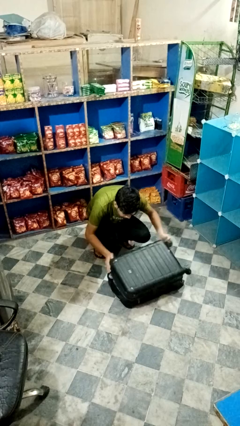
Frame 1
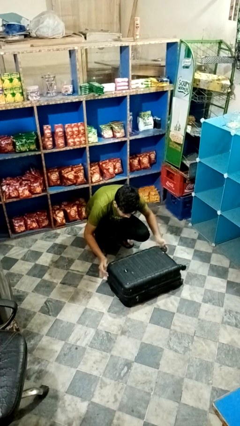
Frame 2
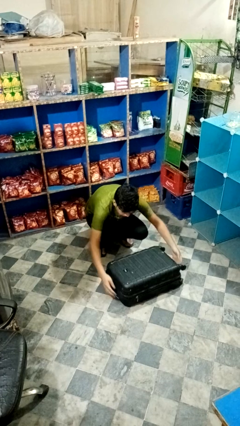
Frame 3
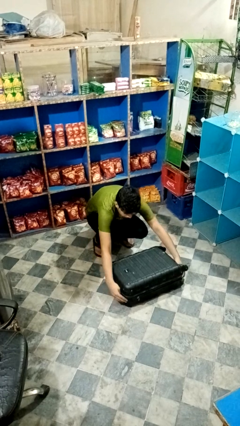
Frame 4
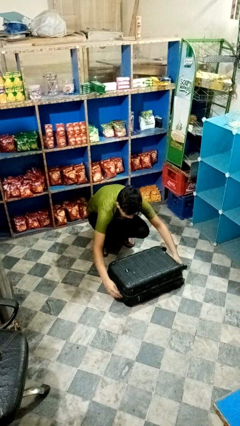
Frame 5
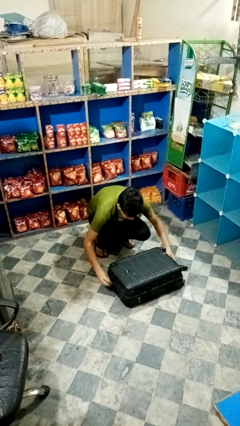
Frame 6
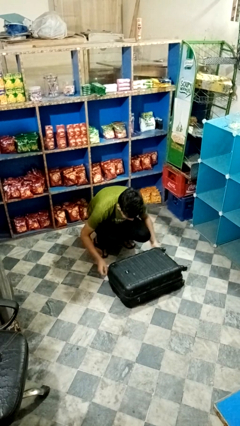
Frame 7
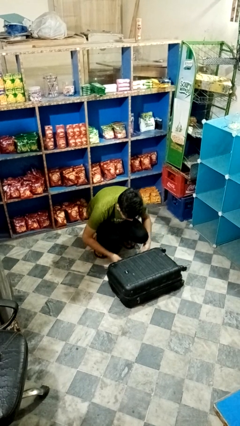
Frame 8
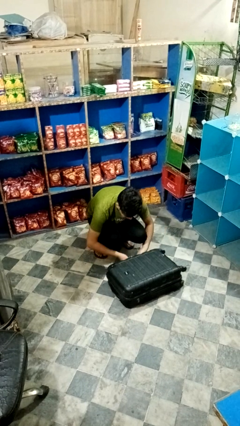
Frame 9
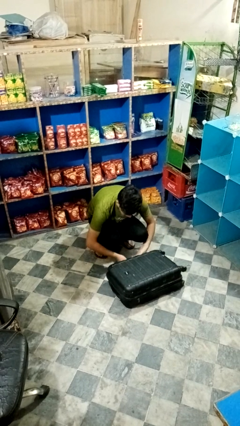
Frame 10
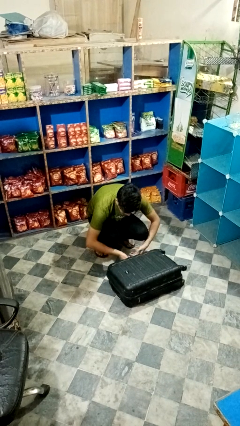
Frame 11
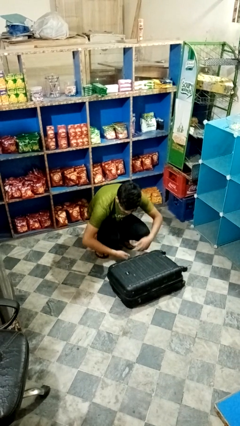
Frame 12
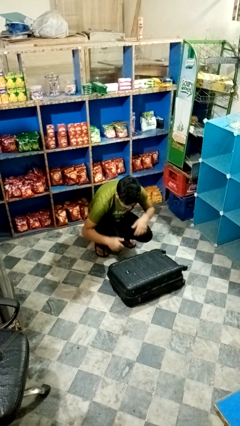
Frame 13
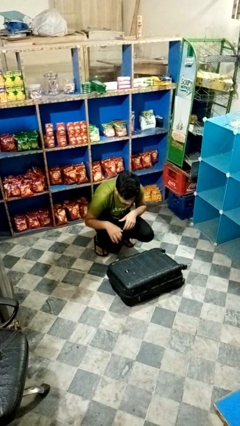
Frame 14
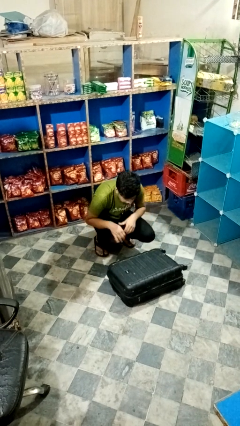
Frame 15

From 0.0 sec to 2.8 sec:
person closes suitcase

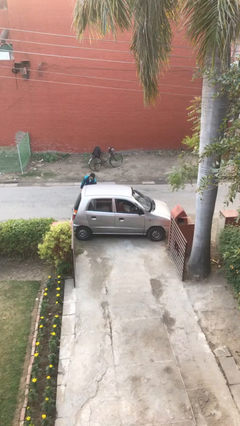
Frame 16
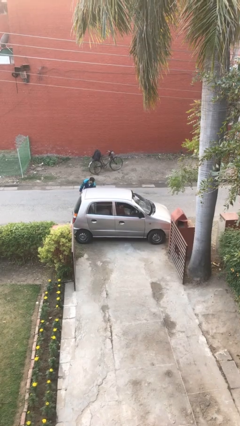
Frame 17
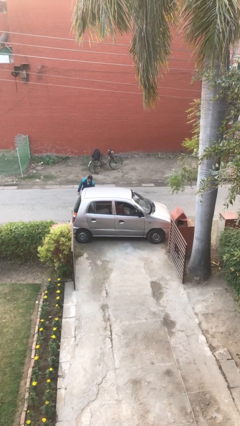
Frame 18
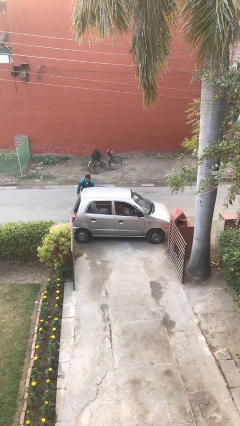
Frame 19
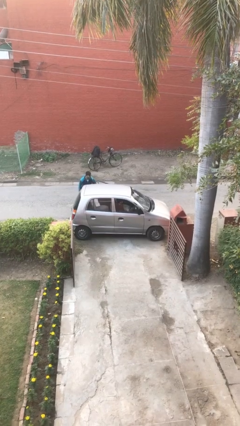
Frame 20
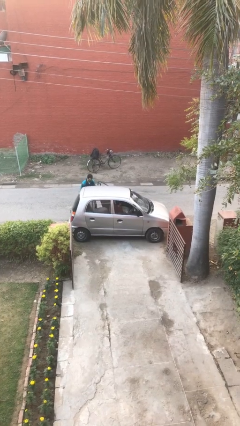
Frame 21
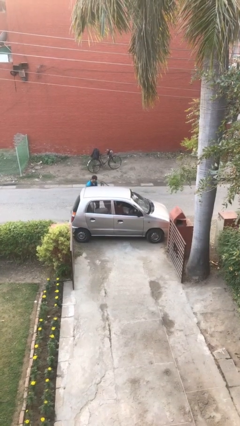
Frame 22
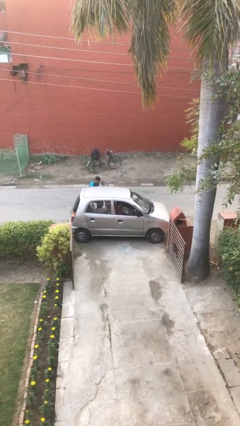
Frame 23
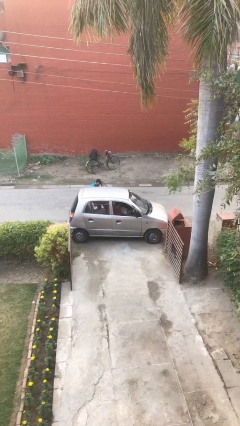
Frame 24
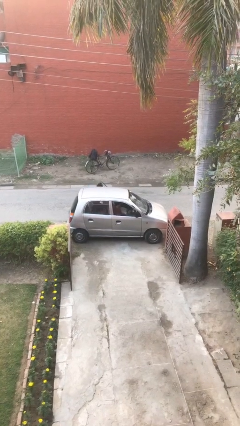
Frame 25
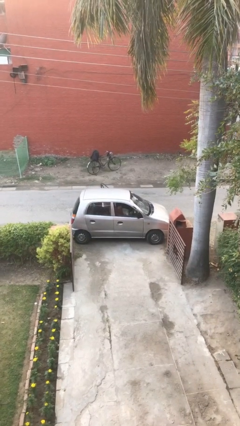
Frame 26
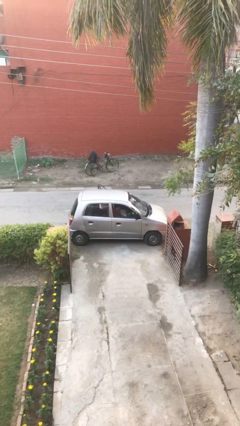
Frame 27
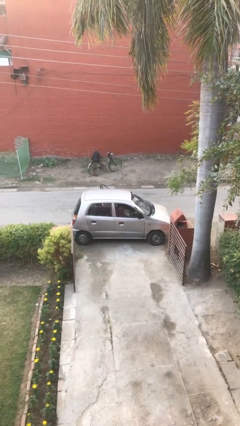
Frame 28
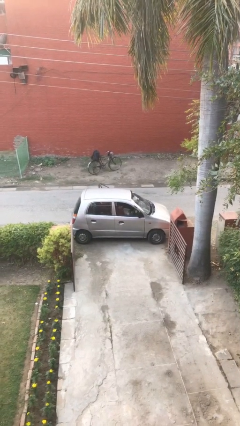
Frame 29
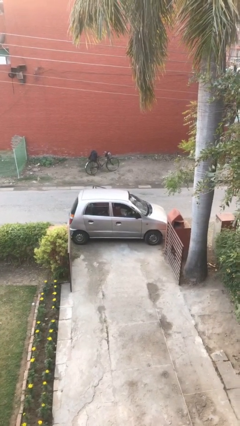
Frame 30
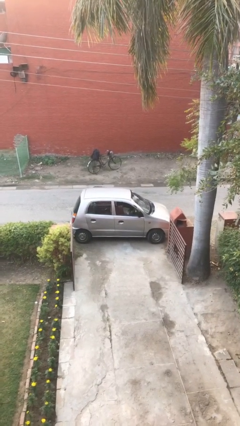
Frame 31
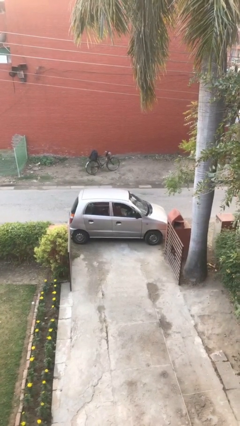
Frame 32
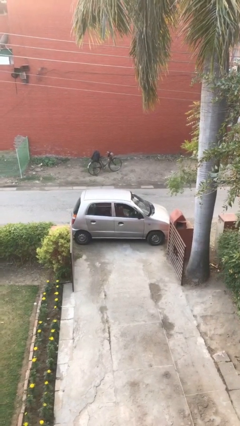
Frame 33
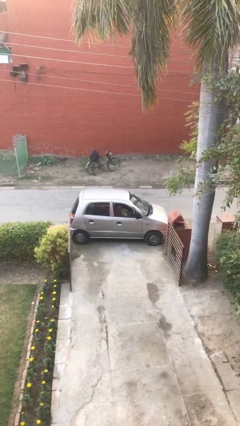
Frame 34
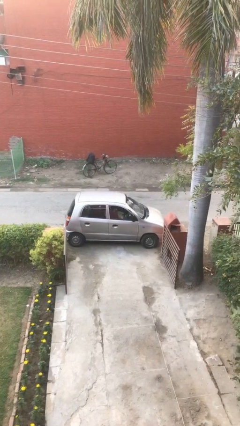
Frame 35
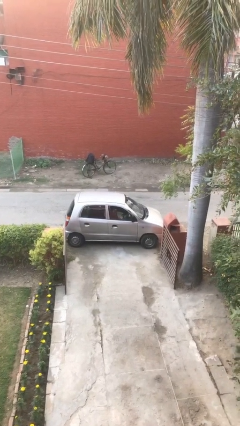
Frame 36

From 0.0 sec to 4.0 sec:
car picks up person

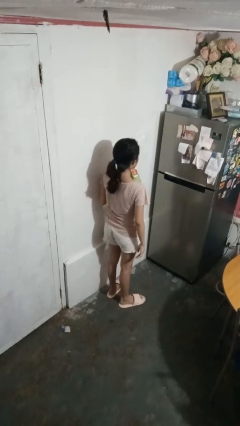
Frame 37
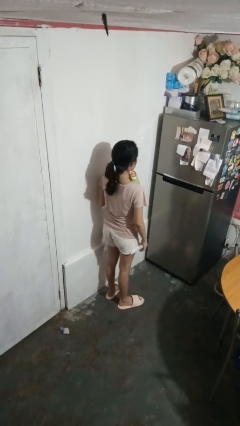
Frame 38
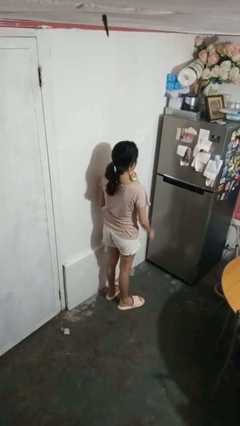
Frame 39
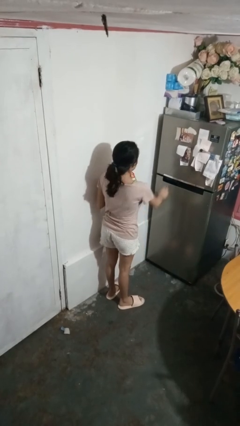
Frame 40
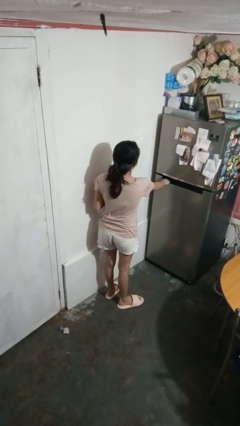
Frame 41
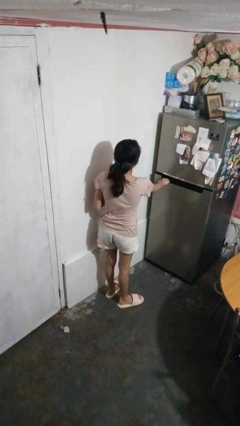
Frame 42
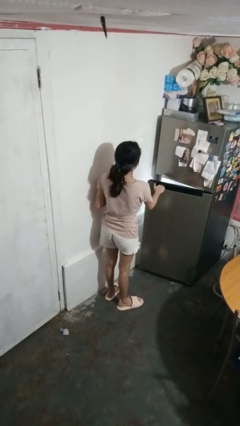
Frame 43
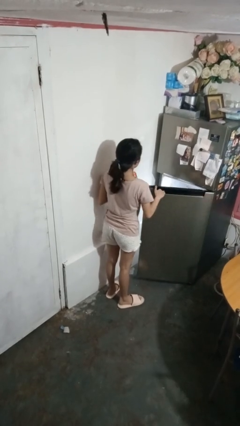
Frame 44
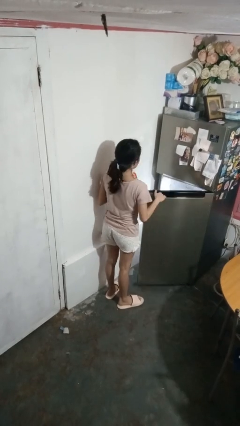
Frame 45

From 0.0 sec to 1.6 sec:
person opens refrigerator

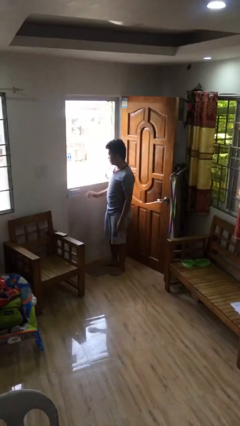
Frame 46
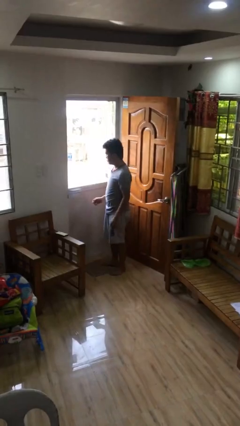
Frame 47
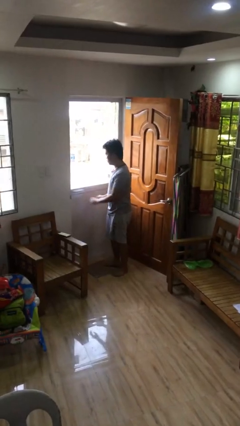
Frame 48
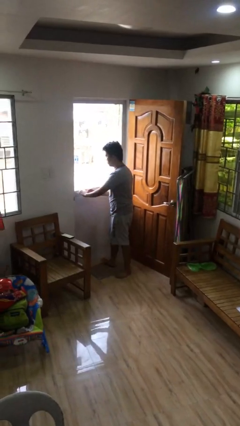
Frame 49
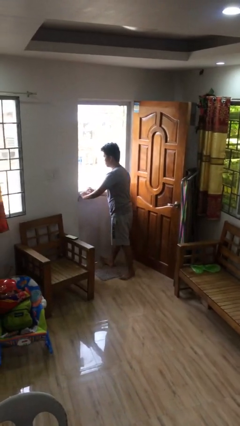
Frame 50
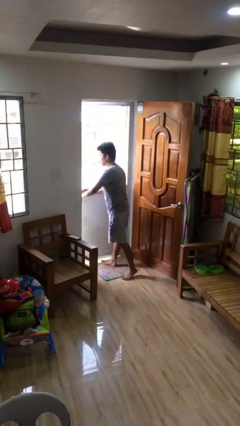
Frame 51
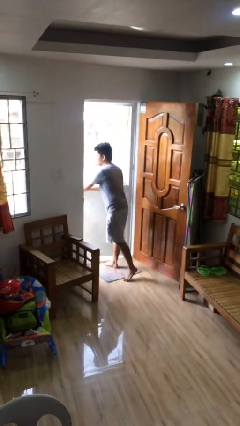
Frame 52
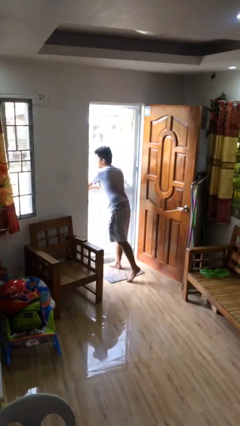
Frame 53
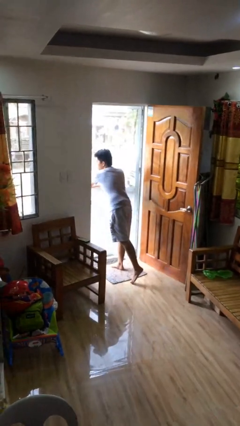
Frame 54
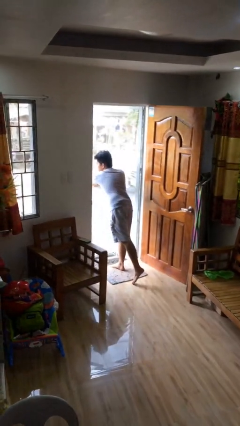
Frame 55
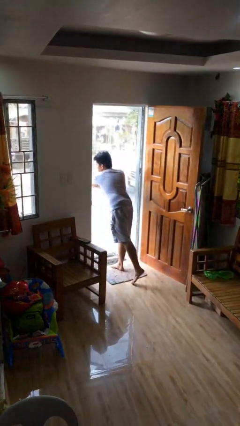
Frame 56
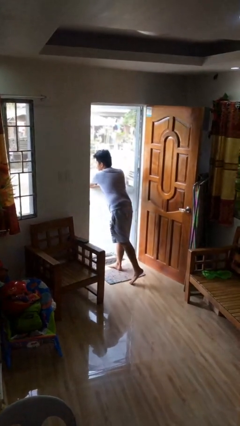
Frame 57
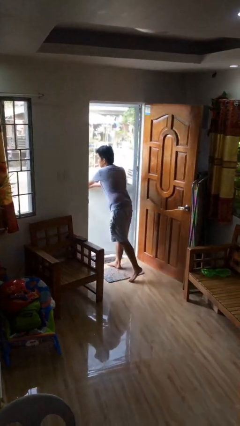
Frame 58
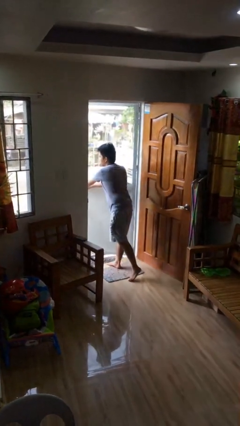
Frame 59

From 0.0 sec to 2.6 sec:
person opens facility door

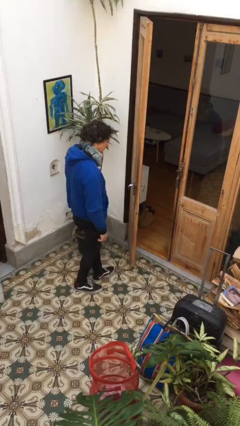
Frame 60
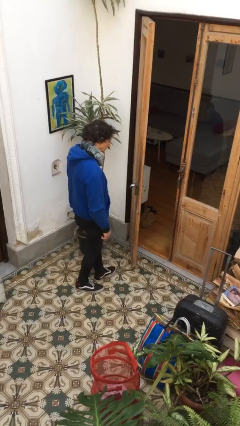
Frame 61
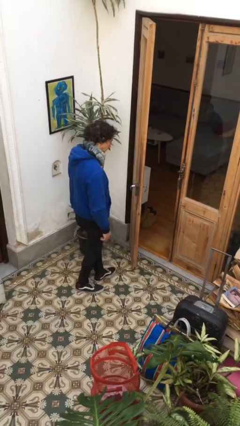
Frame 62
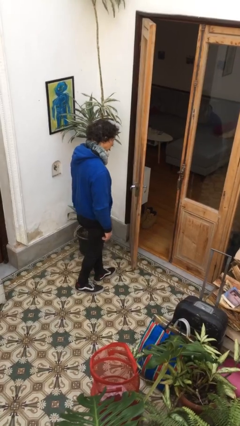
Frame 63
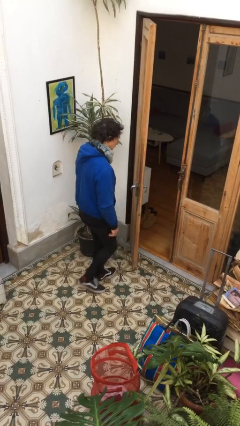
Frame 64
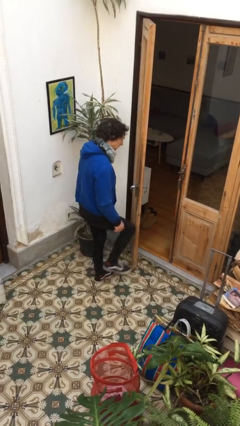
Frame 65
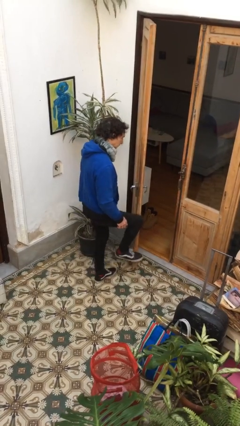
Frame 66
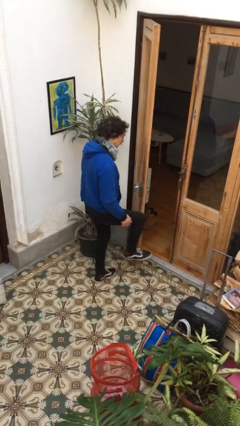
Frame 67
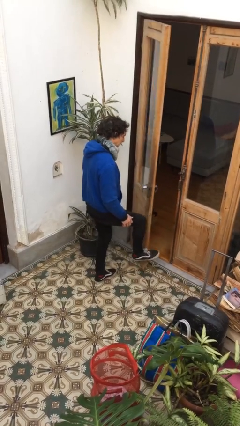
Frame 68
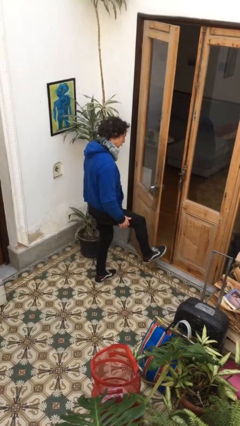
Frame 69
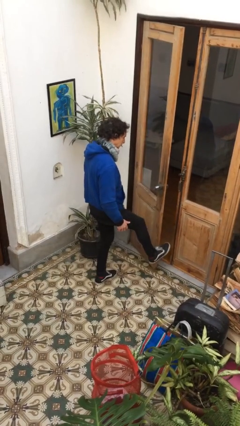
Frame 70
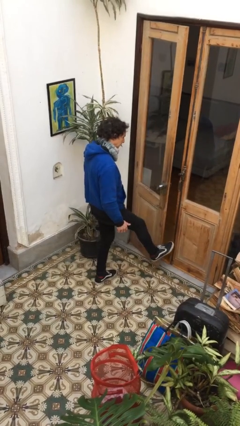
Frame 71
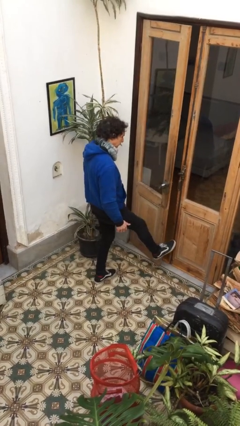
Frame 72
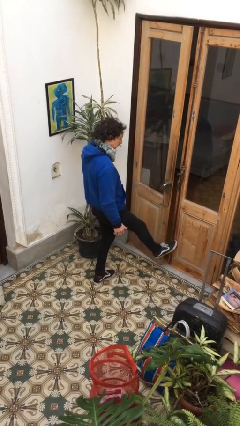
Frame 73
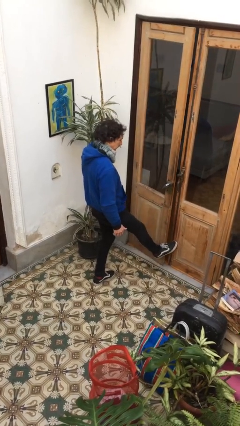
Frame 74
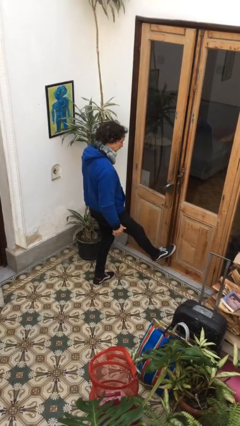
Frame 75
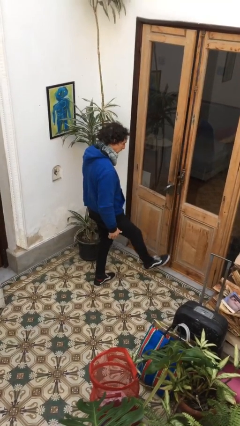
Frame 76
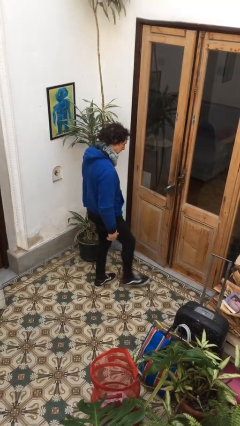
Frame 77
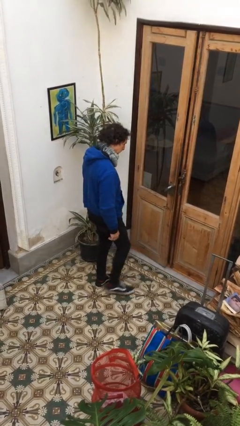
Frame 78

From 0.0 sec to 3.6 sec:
person closes door with foot

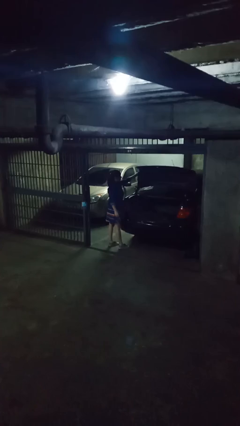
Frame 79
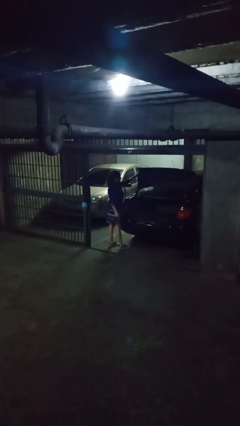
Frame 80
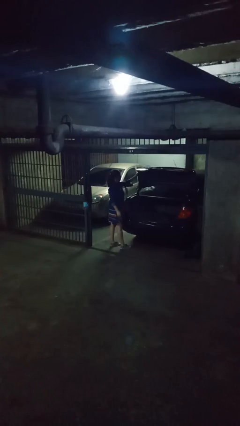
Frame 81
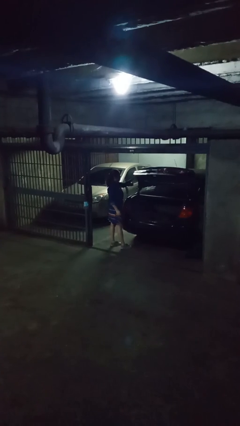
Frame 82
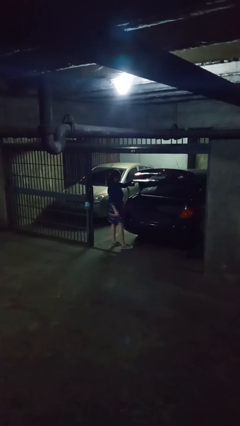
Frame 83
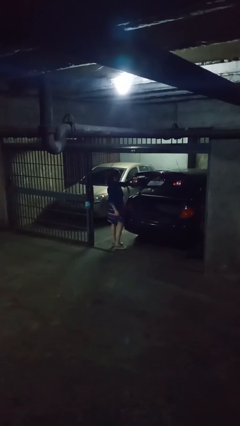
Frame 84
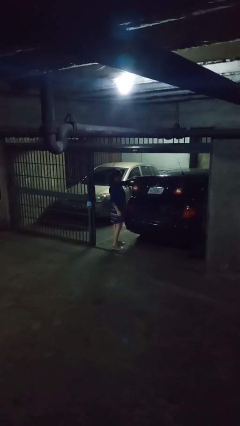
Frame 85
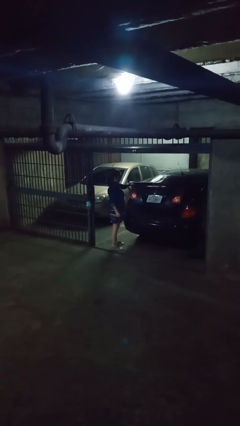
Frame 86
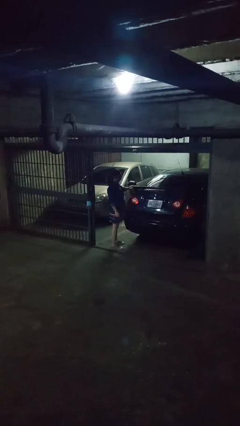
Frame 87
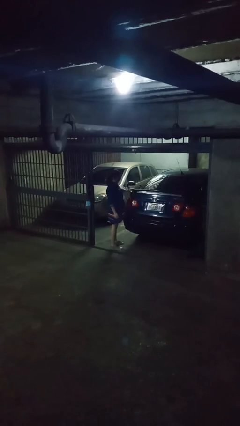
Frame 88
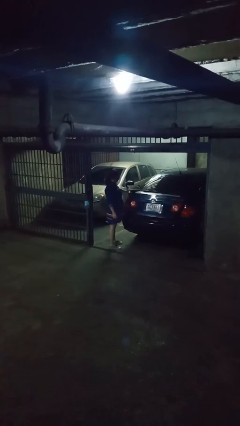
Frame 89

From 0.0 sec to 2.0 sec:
person closes car trunk

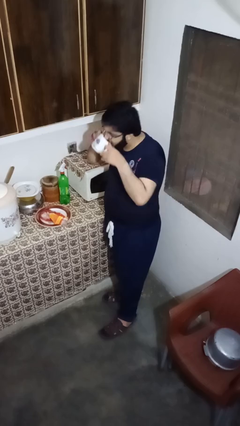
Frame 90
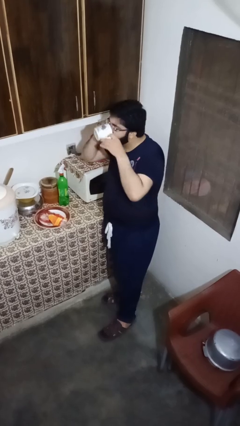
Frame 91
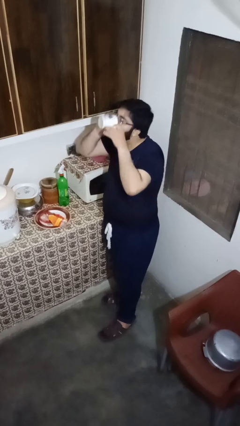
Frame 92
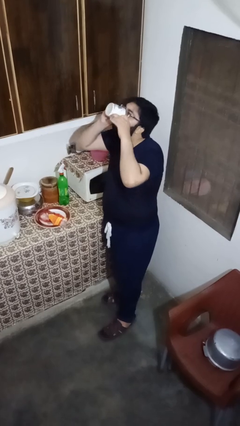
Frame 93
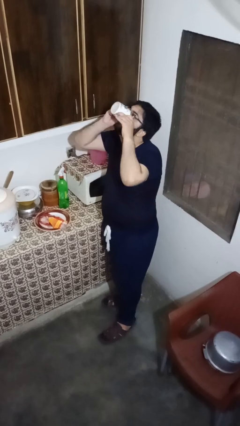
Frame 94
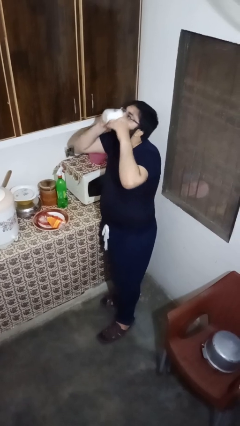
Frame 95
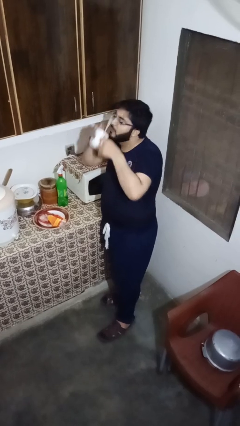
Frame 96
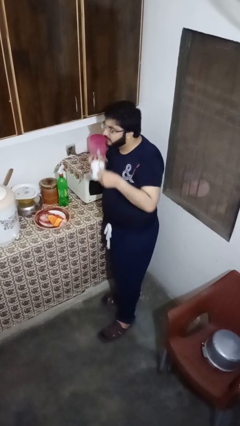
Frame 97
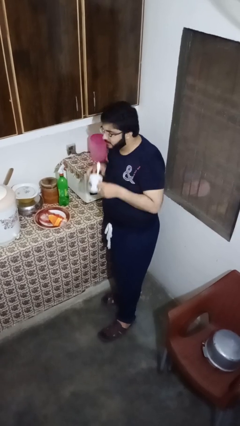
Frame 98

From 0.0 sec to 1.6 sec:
person drinks from mug
